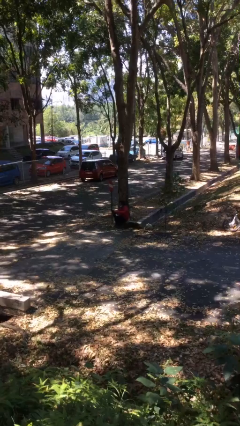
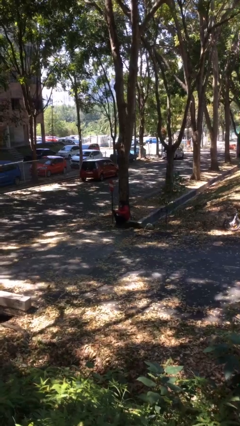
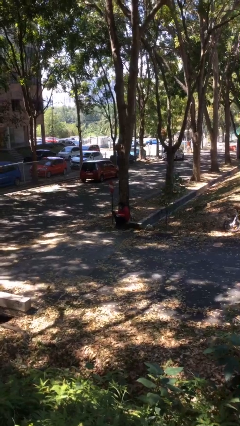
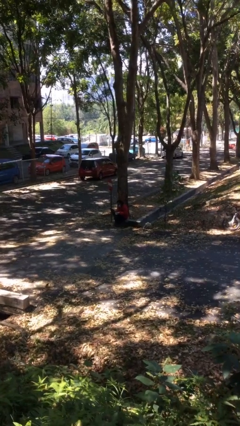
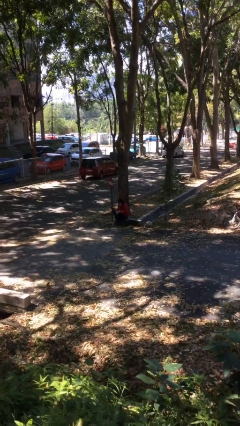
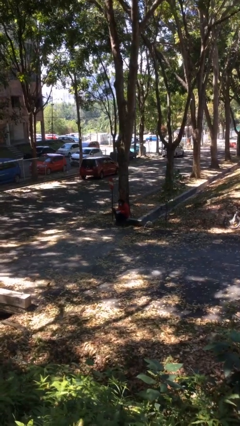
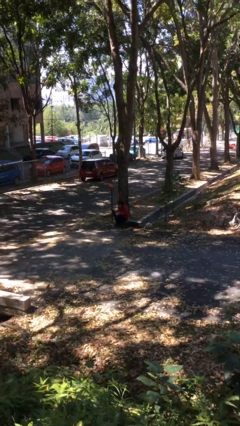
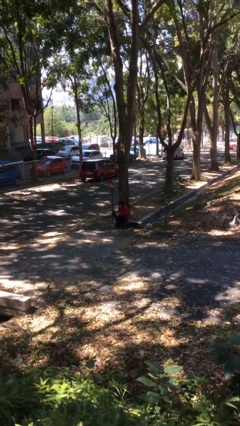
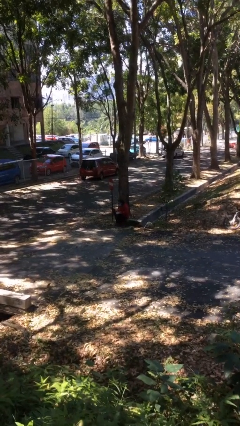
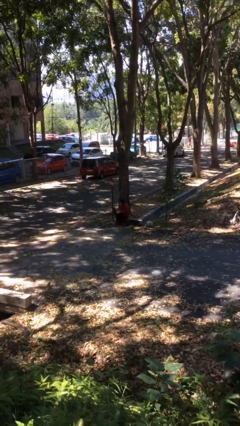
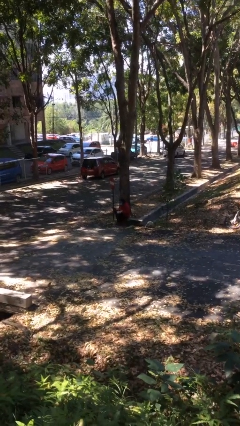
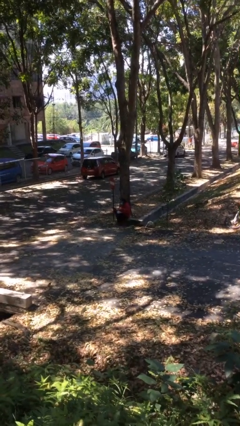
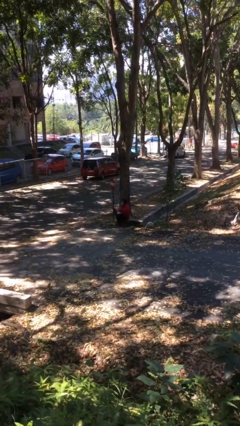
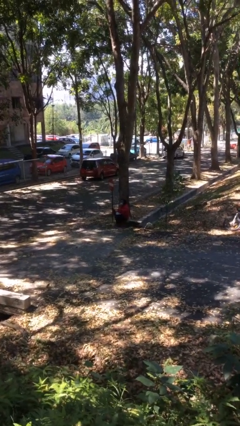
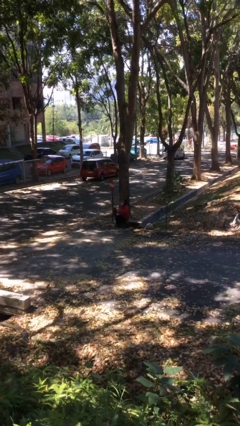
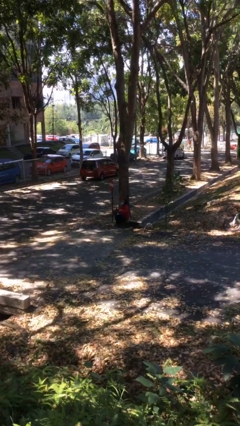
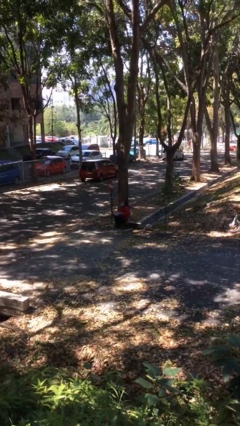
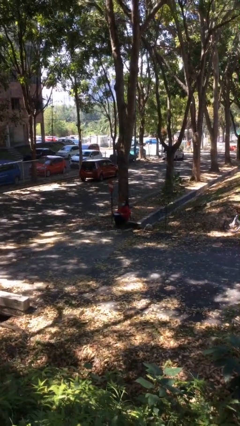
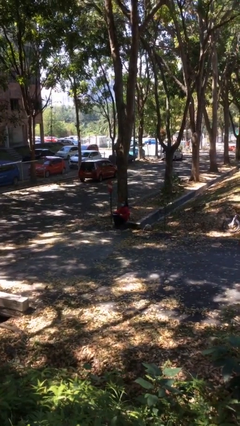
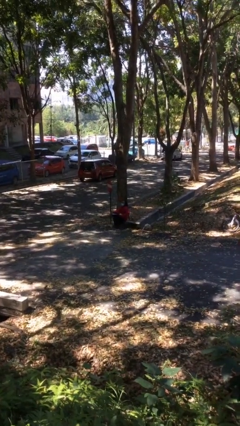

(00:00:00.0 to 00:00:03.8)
person interacts with laptop

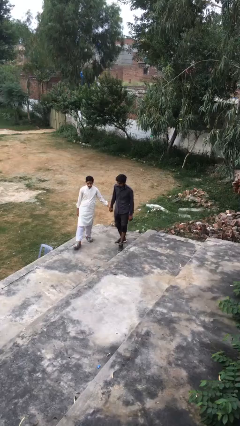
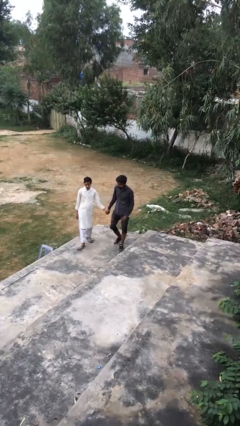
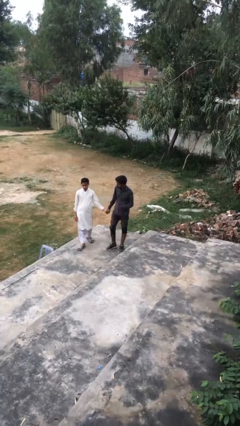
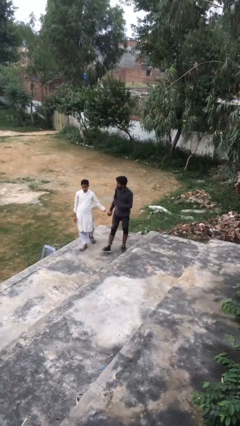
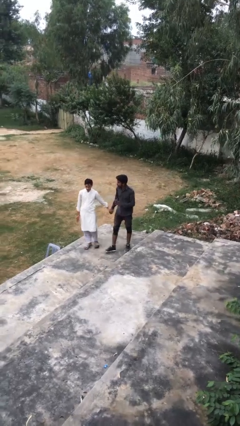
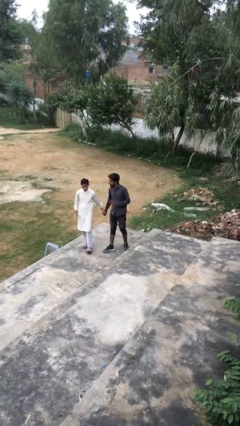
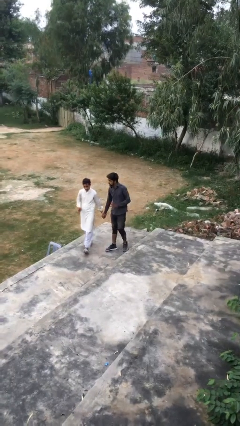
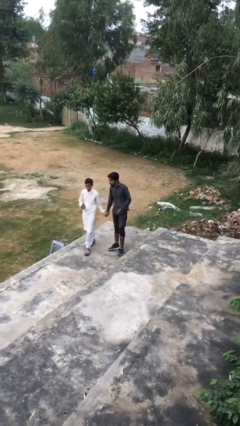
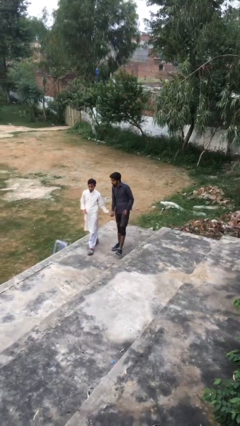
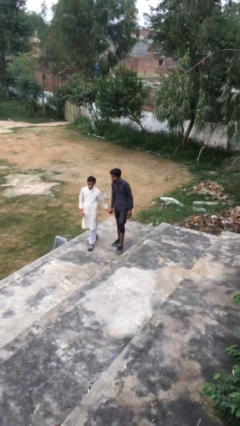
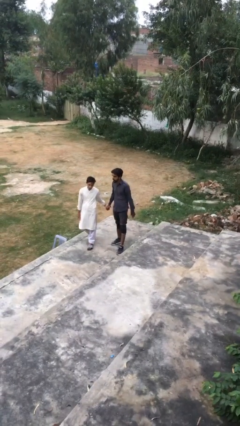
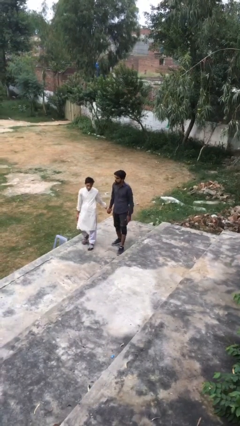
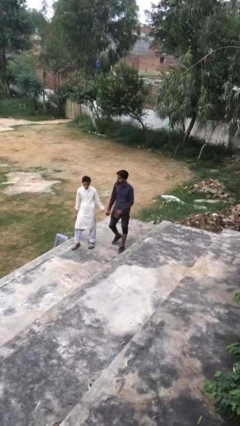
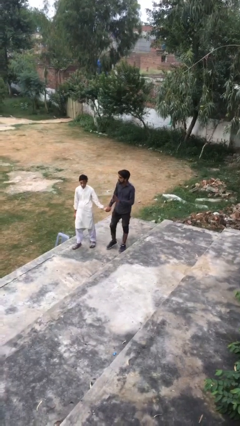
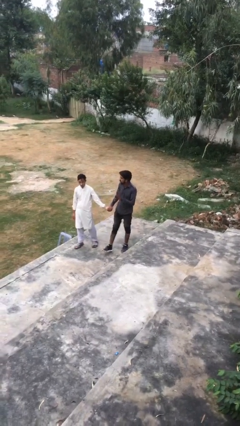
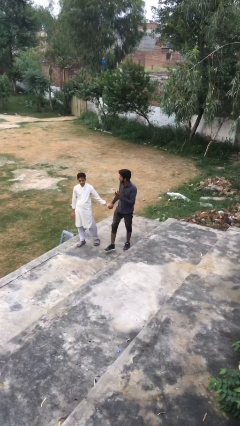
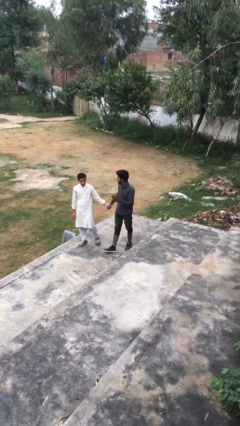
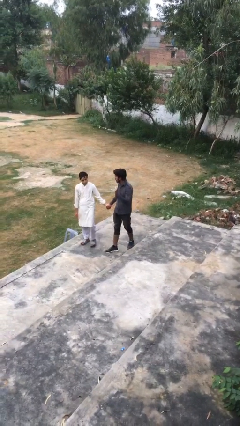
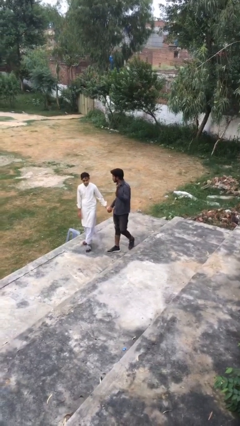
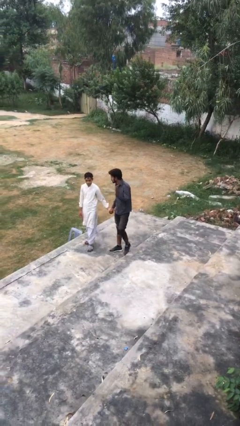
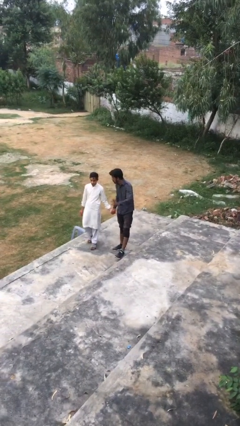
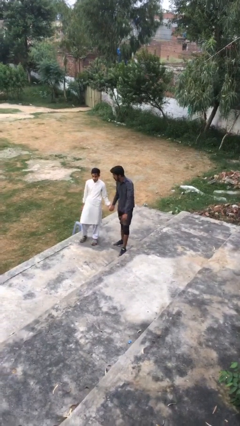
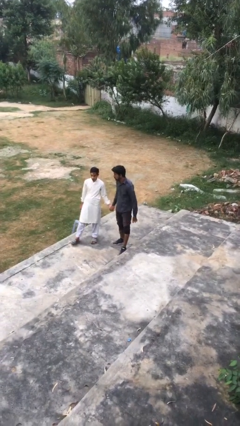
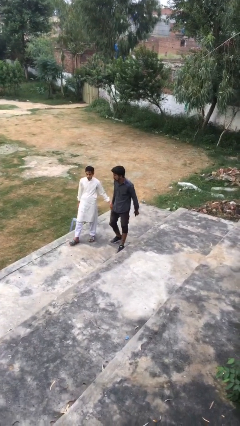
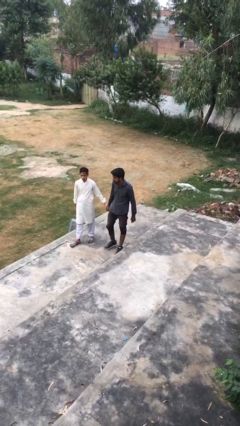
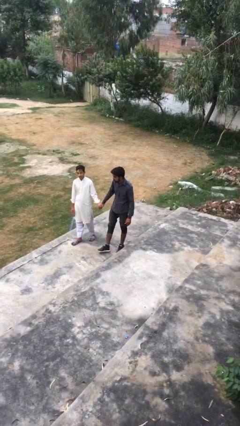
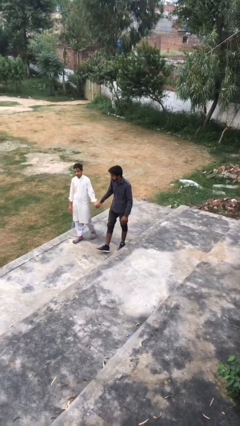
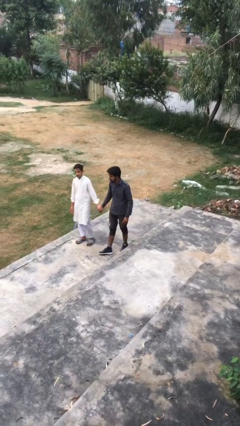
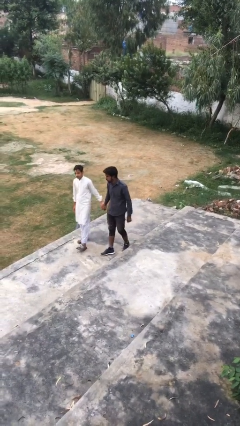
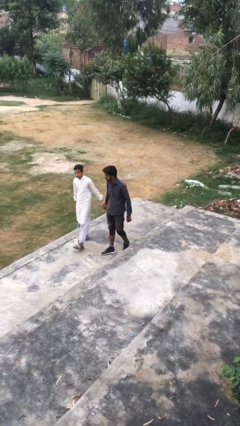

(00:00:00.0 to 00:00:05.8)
person holds hand

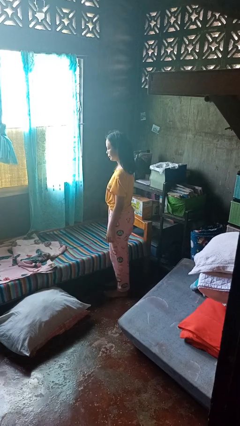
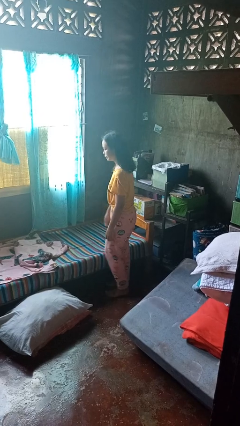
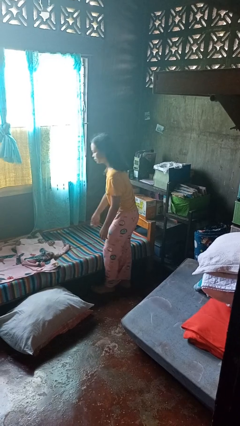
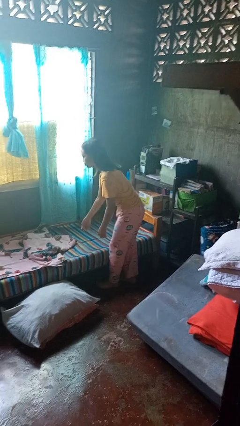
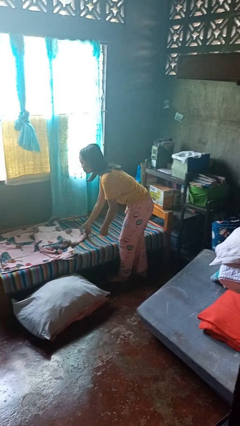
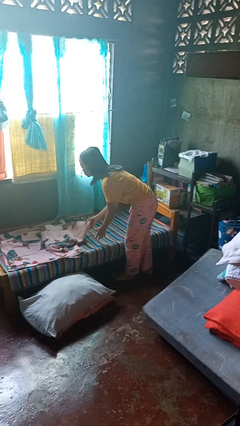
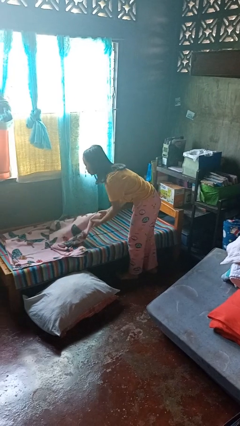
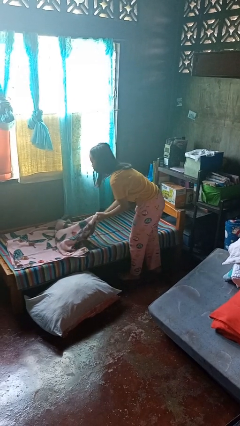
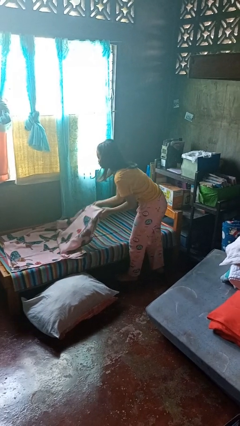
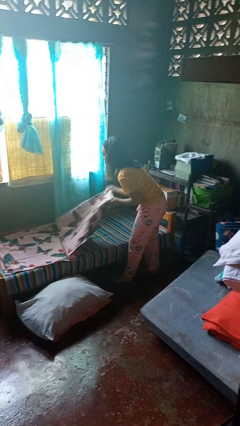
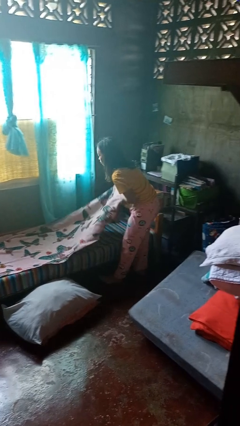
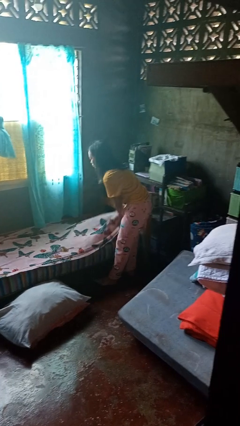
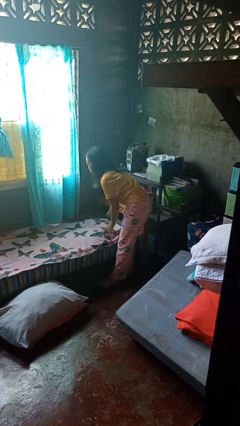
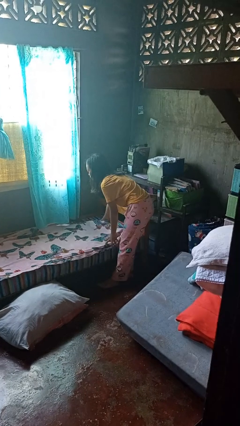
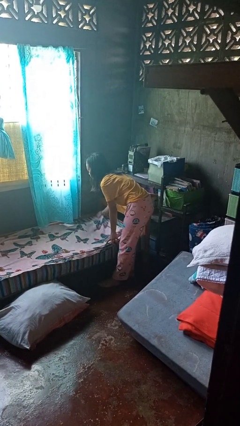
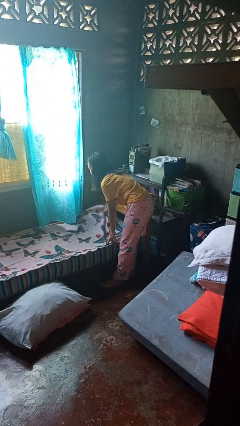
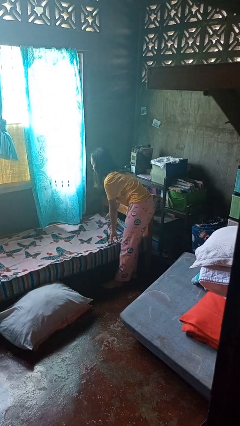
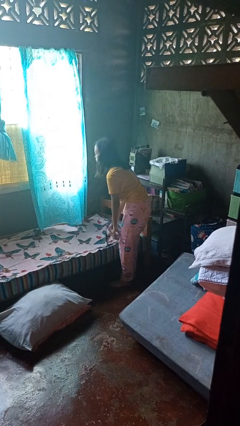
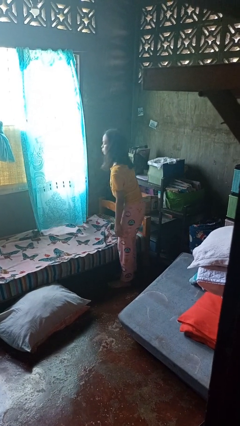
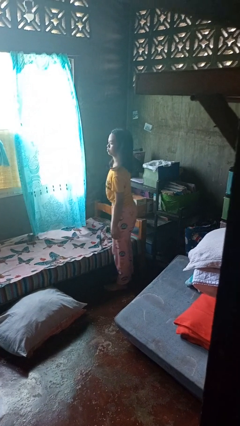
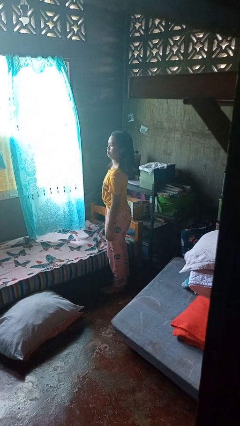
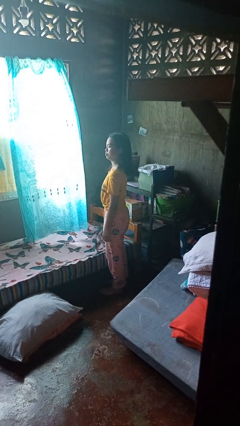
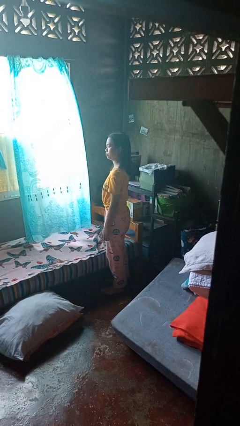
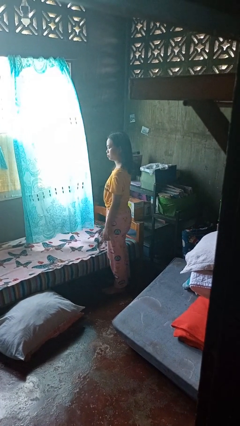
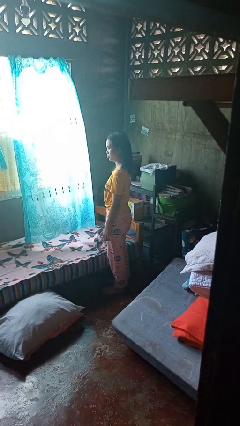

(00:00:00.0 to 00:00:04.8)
person makes bed

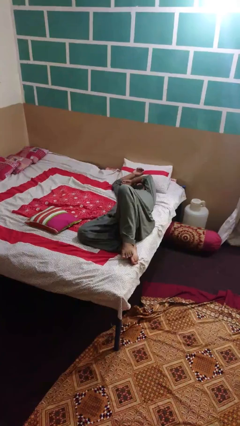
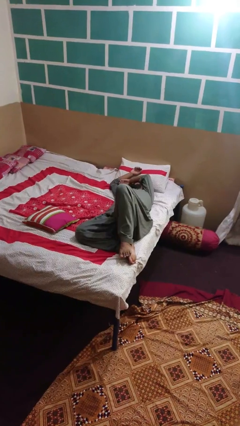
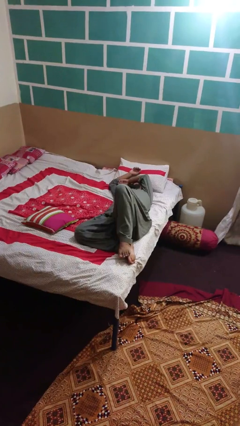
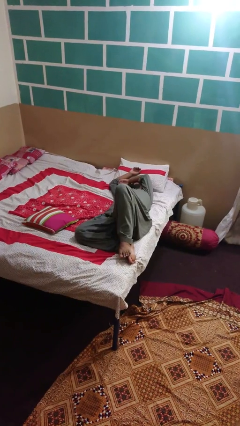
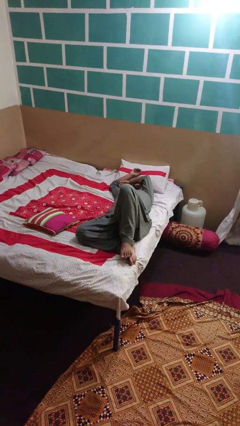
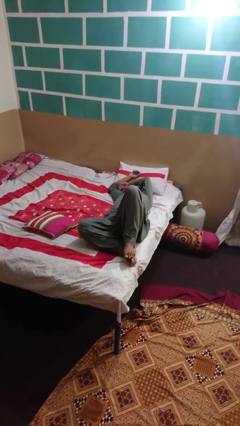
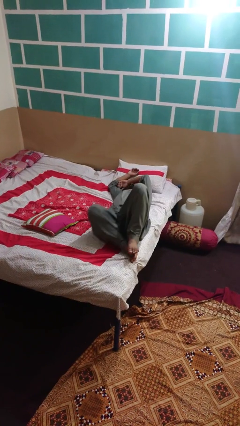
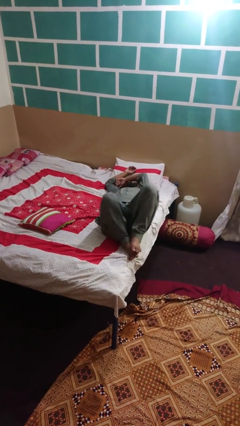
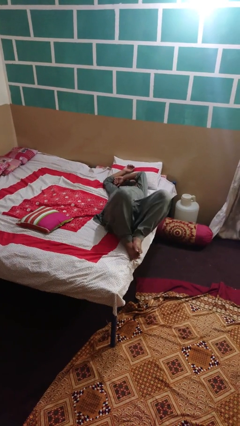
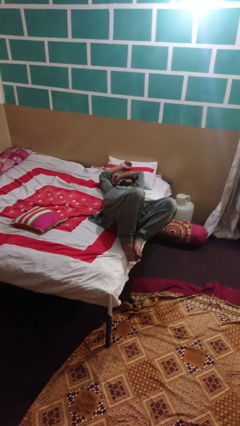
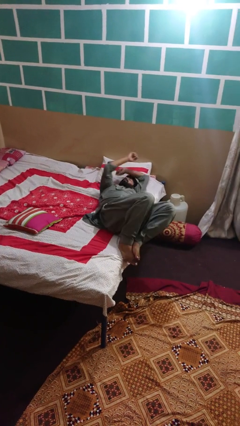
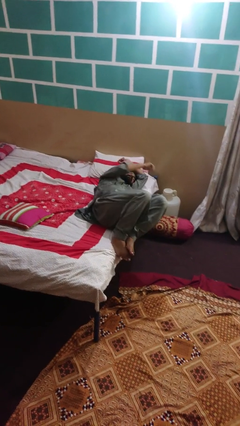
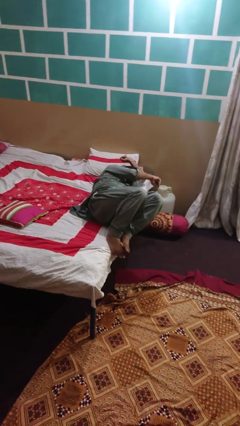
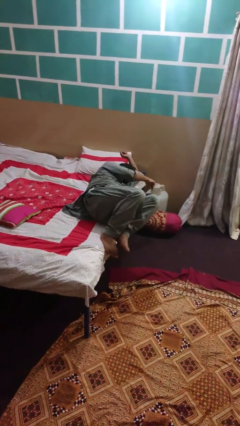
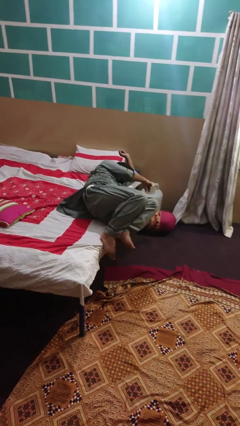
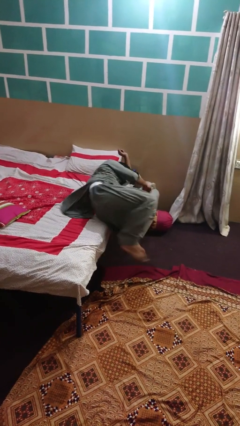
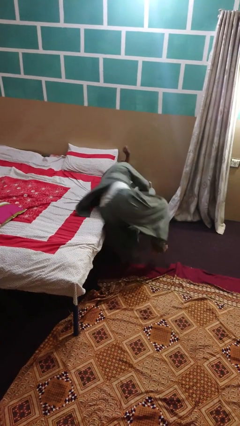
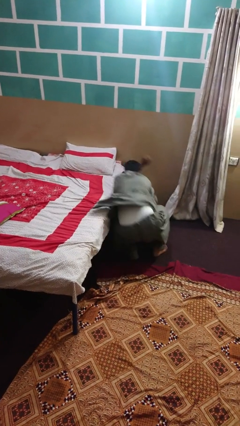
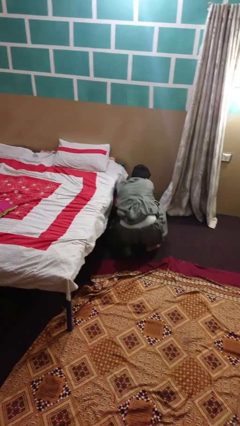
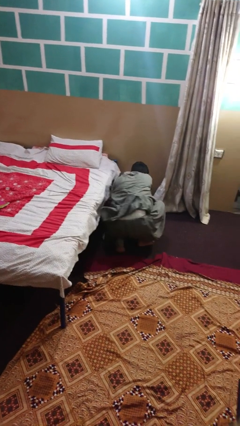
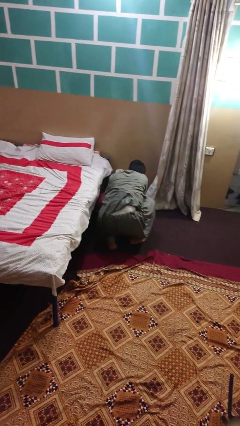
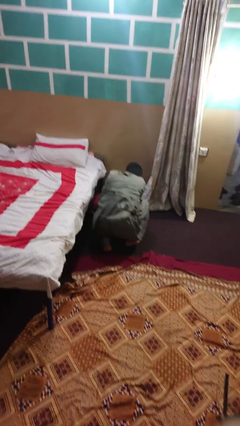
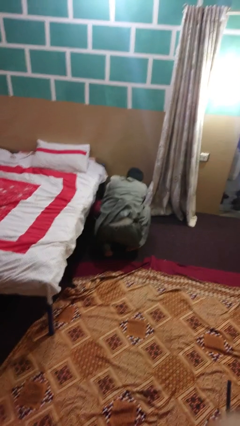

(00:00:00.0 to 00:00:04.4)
person falls from bed
